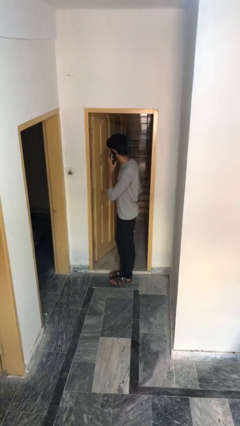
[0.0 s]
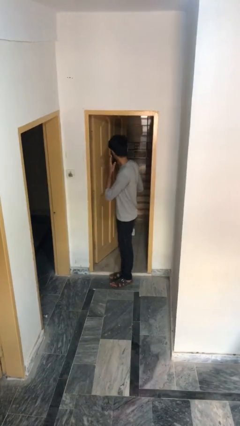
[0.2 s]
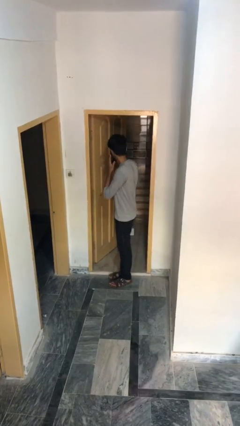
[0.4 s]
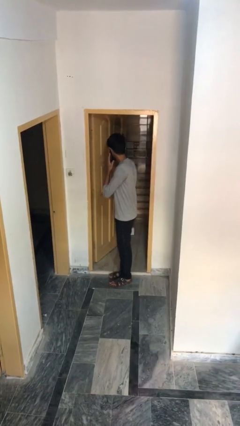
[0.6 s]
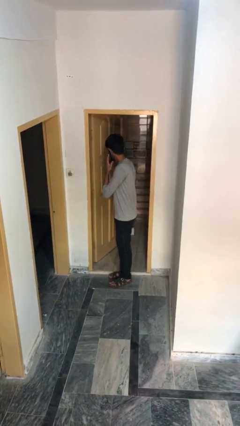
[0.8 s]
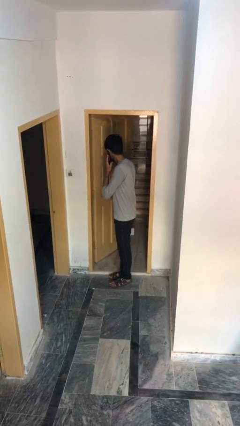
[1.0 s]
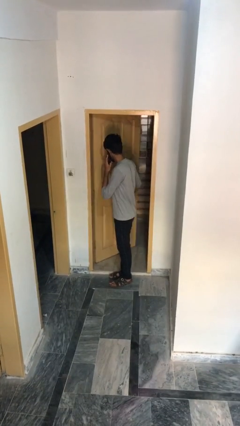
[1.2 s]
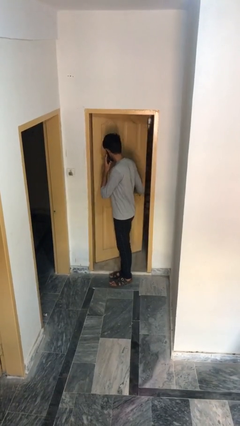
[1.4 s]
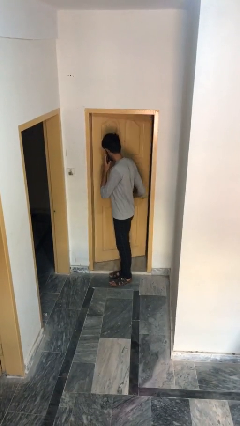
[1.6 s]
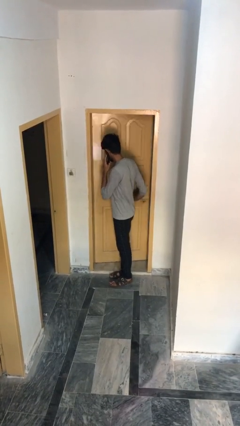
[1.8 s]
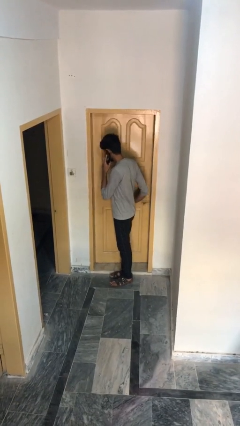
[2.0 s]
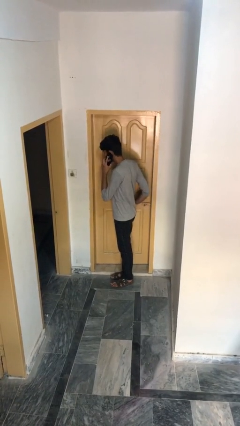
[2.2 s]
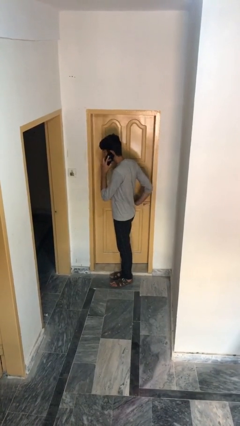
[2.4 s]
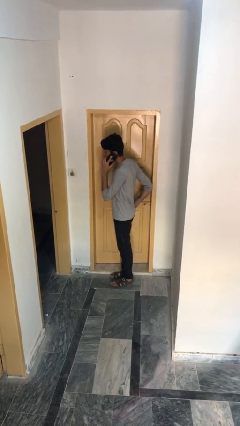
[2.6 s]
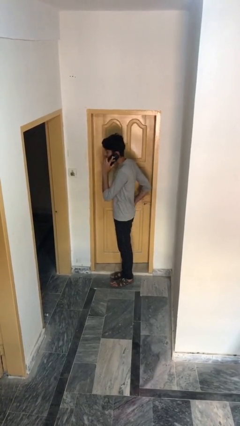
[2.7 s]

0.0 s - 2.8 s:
person closes facility door

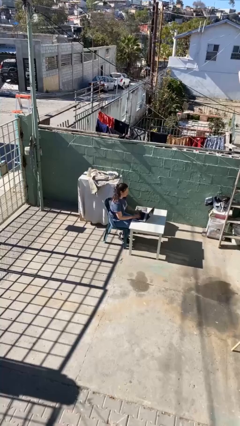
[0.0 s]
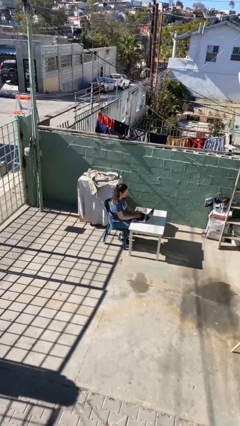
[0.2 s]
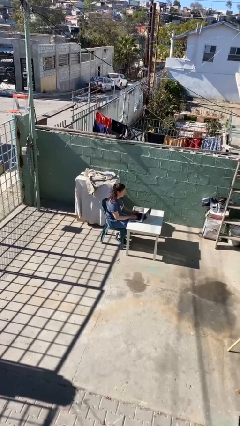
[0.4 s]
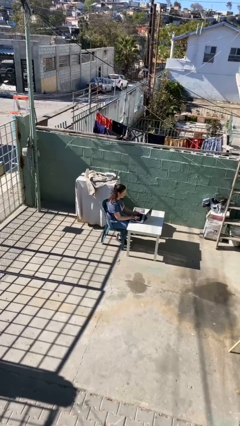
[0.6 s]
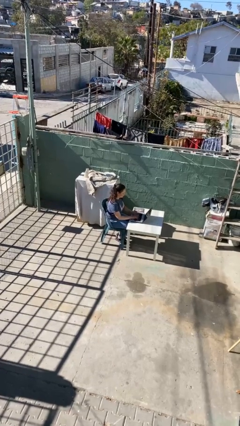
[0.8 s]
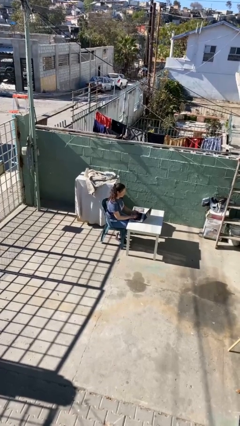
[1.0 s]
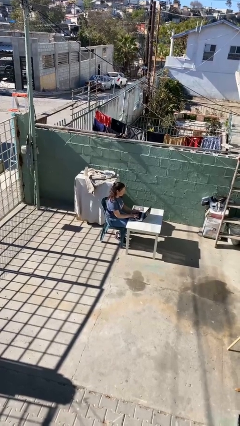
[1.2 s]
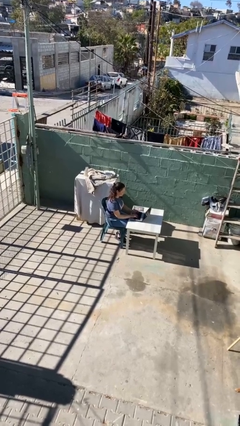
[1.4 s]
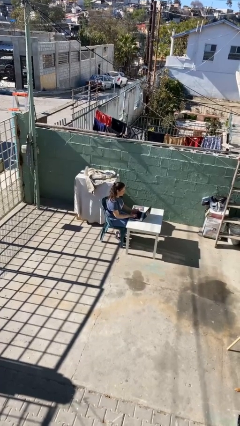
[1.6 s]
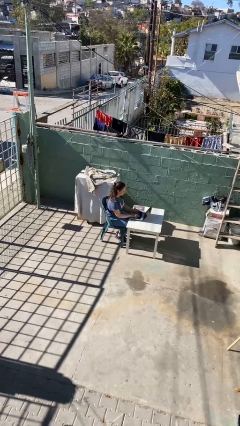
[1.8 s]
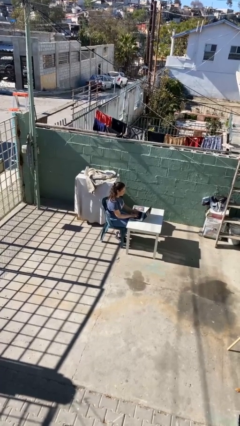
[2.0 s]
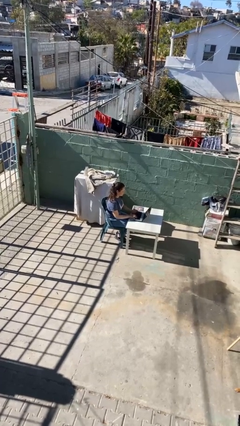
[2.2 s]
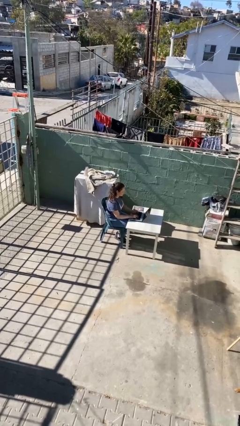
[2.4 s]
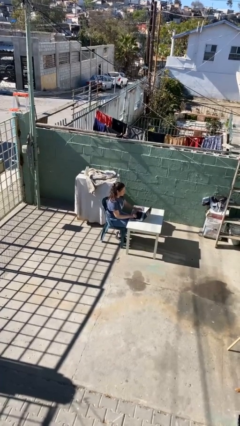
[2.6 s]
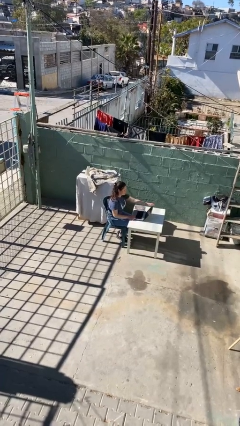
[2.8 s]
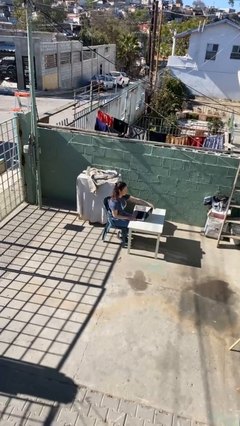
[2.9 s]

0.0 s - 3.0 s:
person interacts with laptop

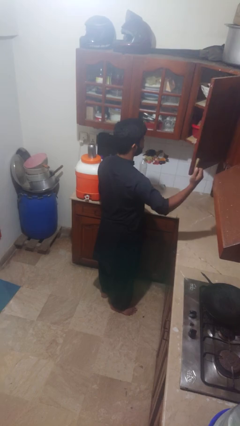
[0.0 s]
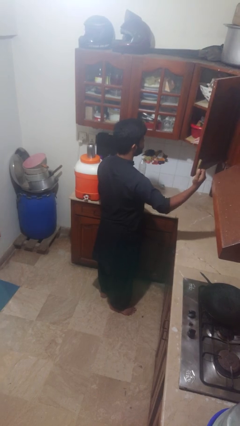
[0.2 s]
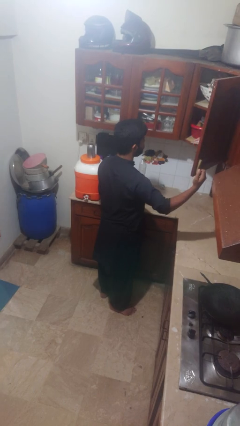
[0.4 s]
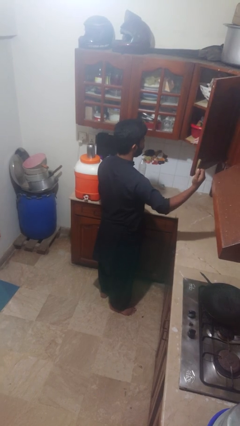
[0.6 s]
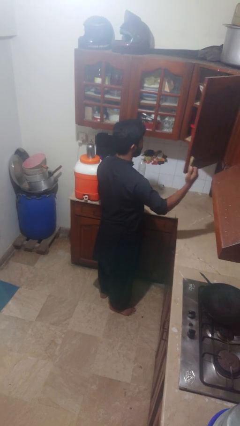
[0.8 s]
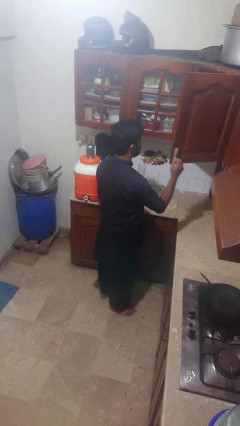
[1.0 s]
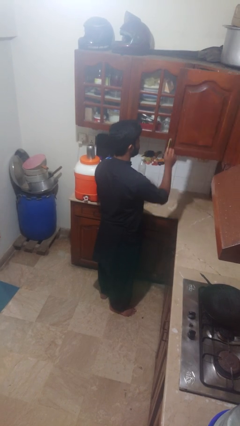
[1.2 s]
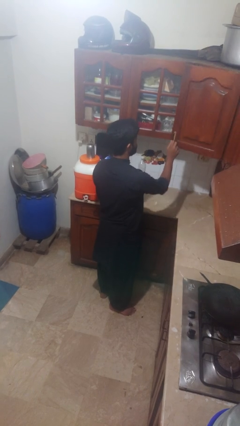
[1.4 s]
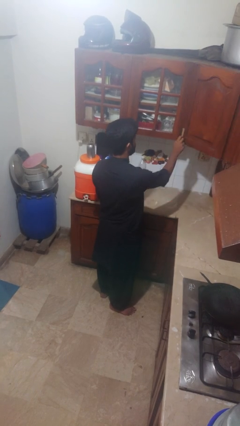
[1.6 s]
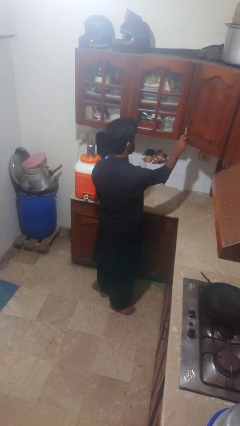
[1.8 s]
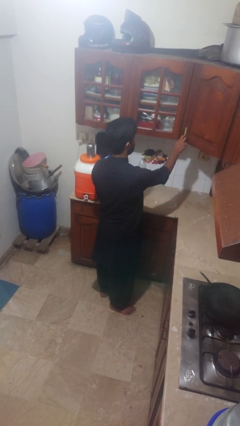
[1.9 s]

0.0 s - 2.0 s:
person closes cabinet

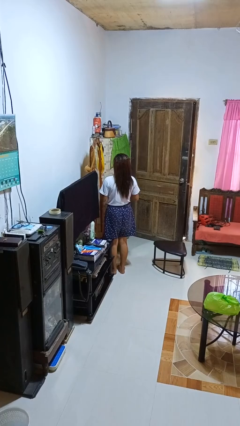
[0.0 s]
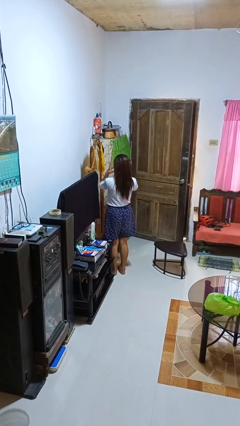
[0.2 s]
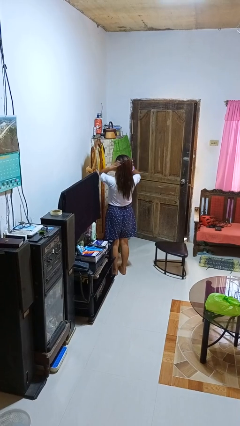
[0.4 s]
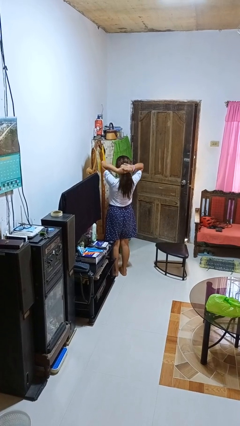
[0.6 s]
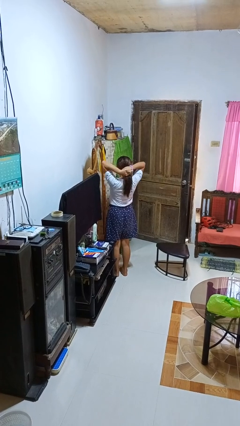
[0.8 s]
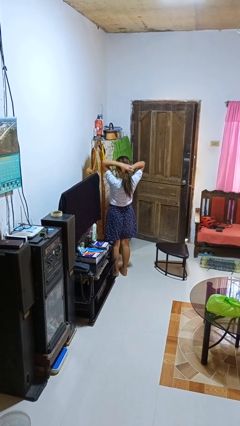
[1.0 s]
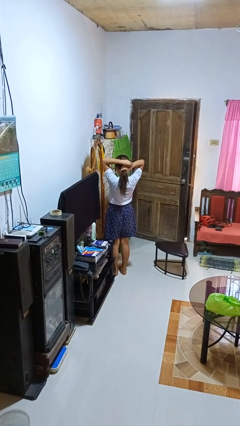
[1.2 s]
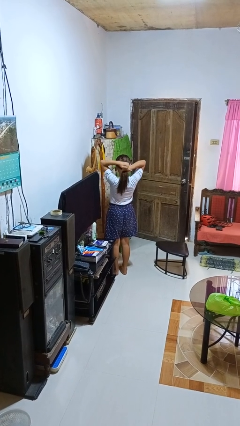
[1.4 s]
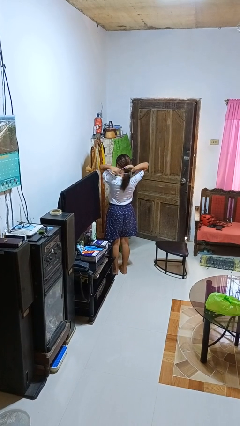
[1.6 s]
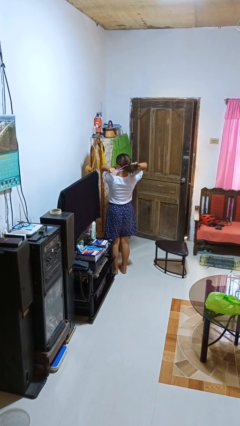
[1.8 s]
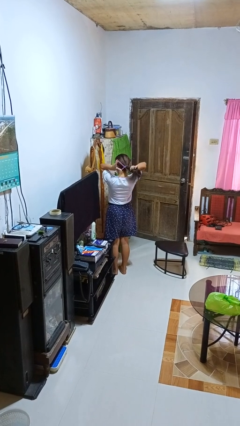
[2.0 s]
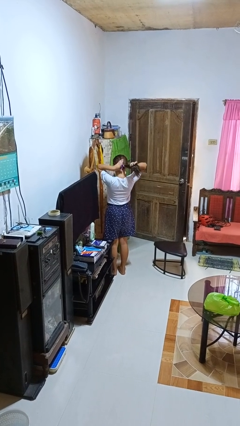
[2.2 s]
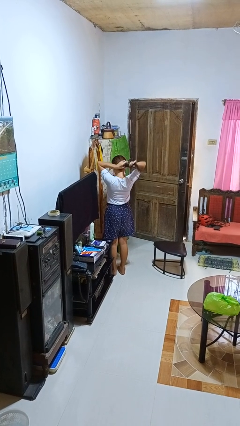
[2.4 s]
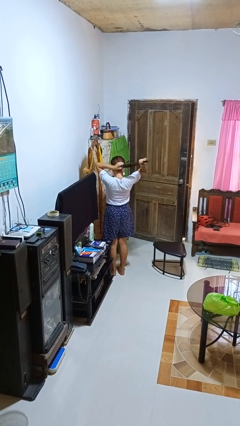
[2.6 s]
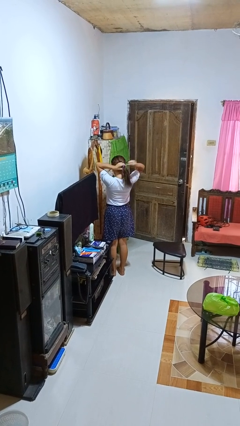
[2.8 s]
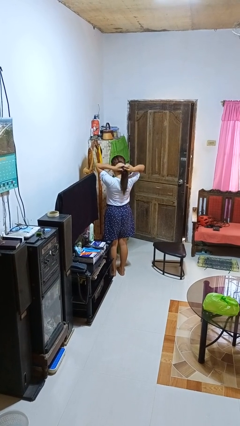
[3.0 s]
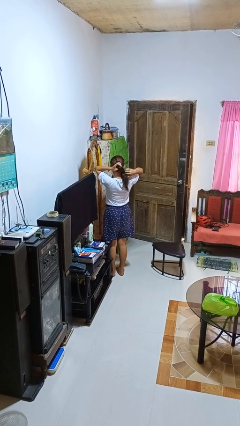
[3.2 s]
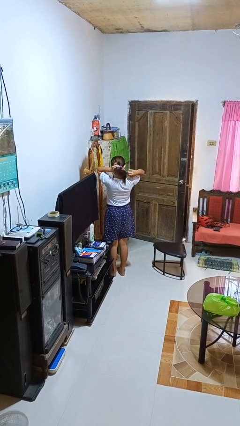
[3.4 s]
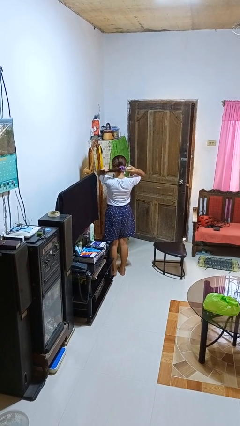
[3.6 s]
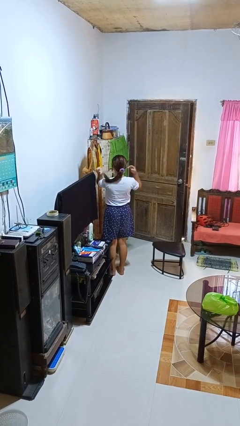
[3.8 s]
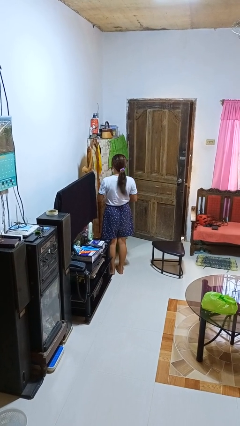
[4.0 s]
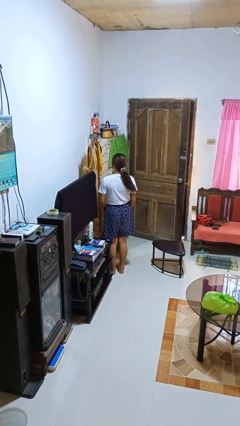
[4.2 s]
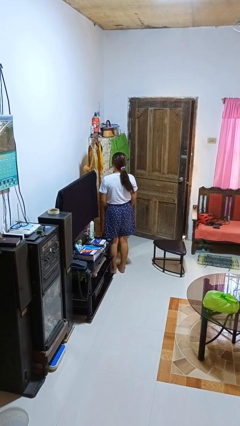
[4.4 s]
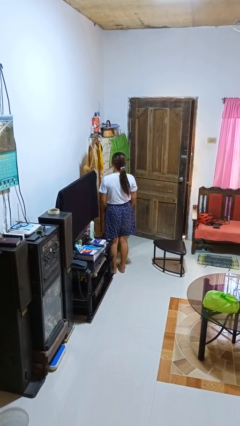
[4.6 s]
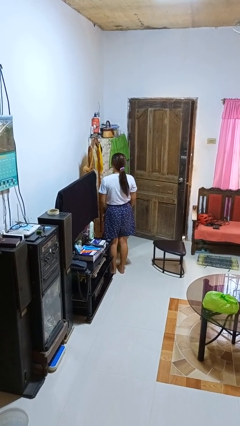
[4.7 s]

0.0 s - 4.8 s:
person puts hair in ponytail

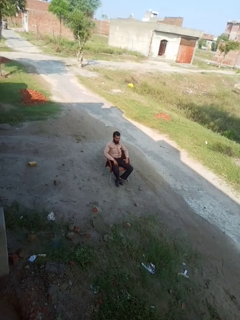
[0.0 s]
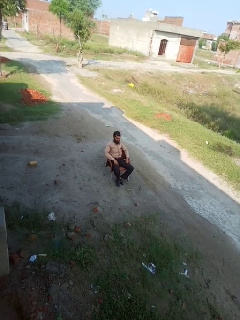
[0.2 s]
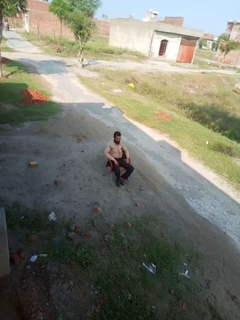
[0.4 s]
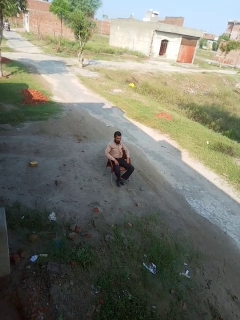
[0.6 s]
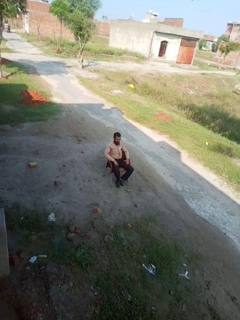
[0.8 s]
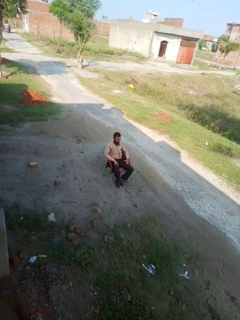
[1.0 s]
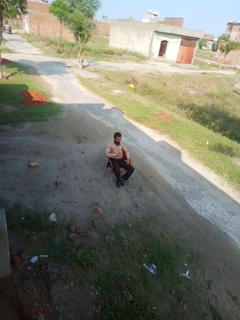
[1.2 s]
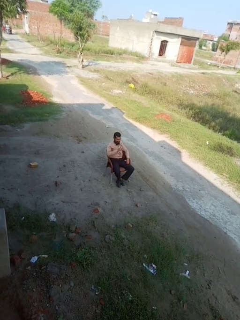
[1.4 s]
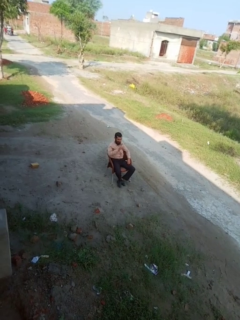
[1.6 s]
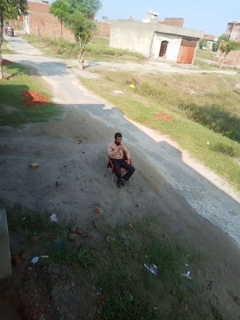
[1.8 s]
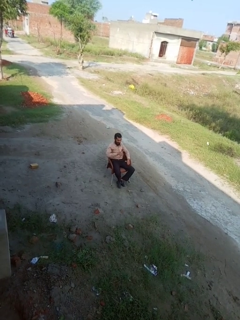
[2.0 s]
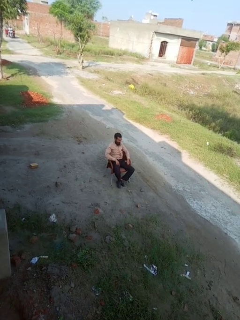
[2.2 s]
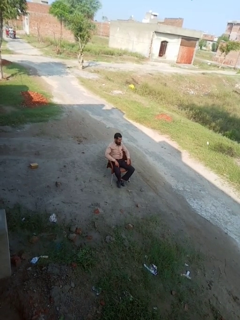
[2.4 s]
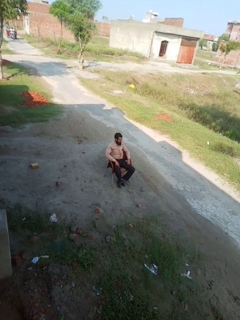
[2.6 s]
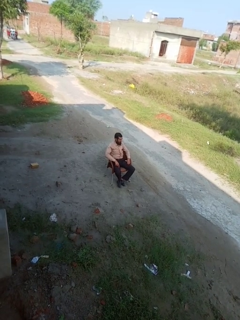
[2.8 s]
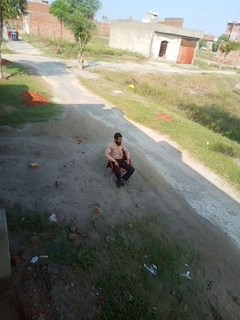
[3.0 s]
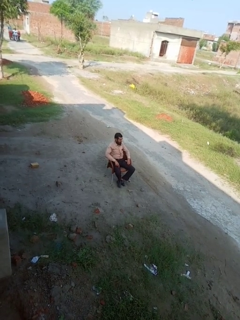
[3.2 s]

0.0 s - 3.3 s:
person gestures number one

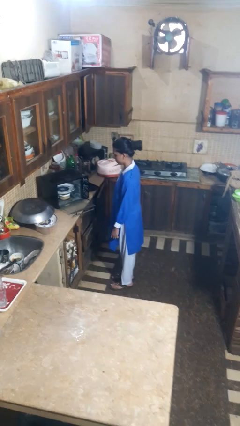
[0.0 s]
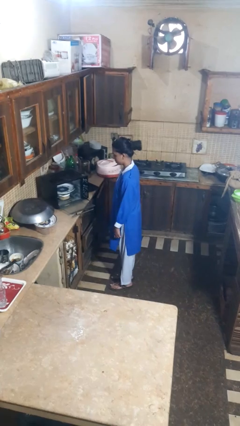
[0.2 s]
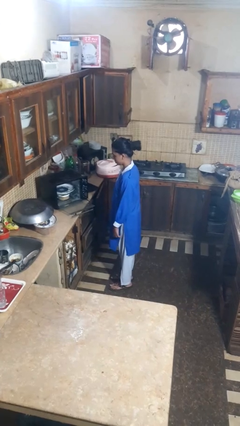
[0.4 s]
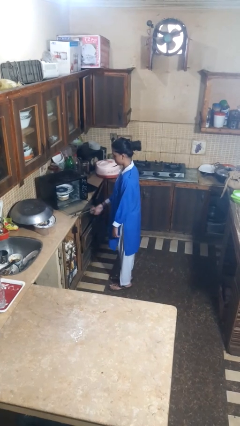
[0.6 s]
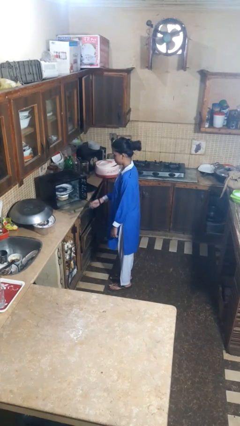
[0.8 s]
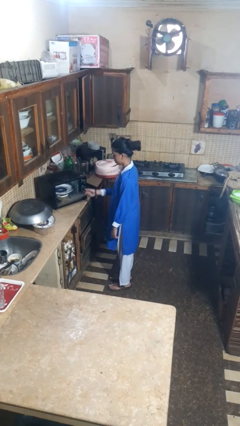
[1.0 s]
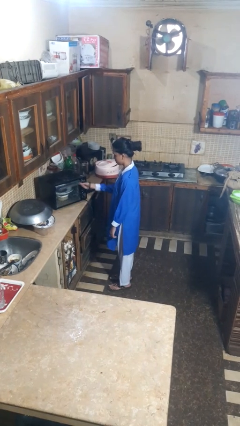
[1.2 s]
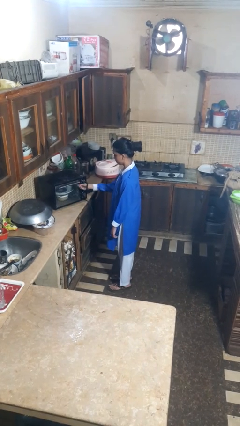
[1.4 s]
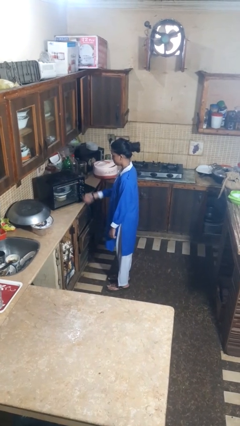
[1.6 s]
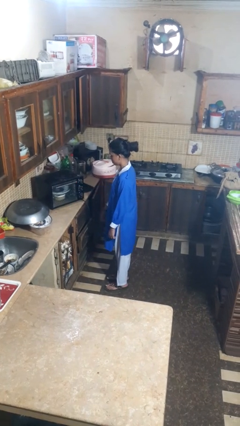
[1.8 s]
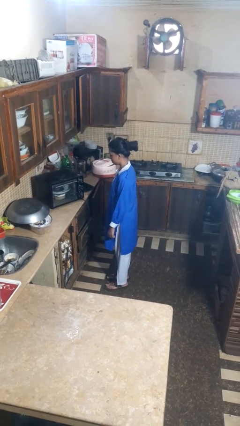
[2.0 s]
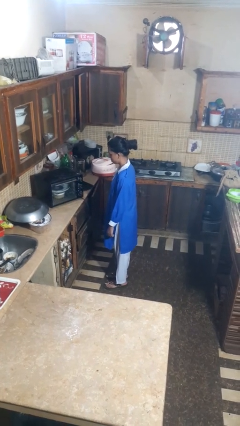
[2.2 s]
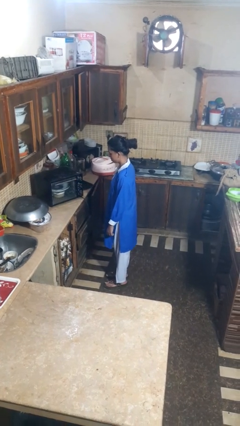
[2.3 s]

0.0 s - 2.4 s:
person closes dishwasher
